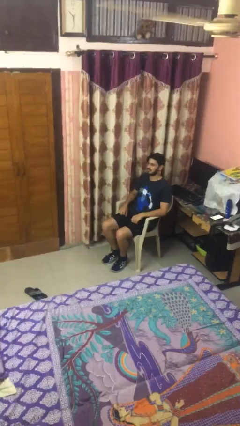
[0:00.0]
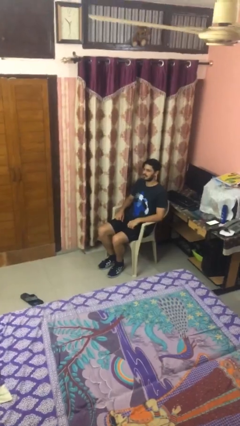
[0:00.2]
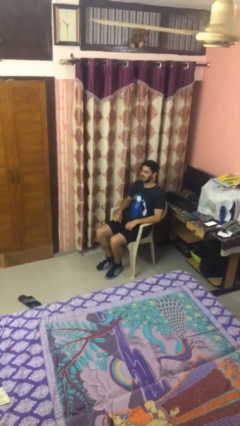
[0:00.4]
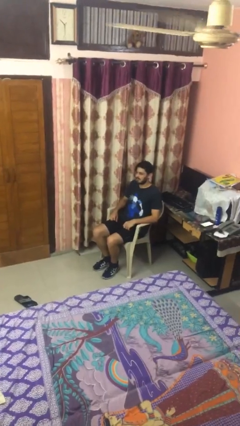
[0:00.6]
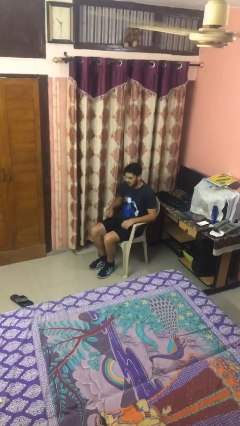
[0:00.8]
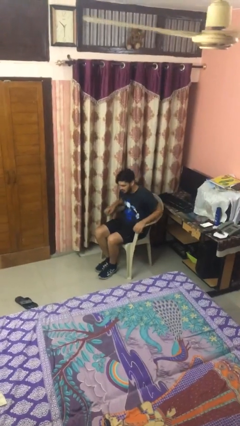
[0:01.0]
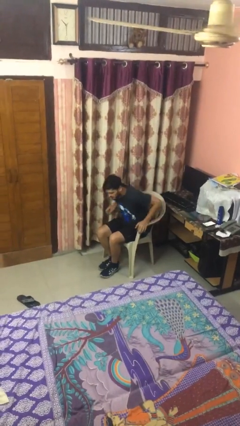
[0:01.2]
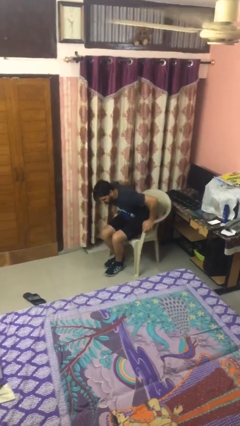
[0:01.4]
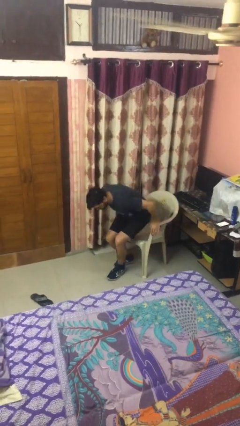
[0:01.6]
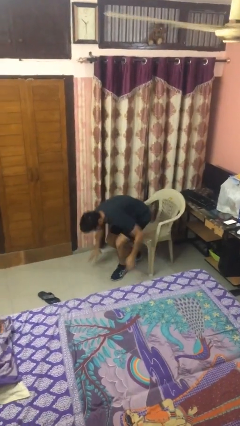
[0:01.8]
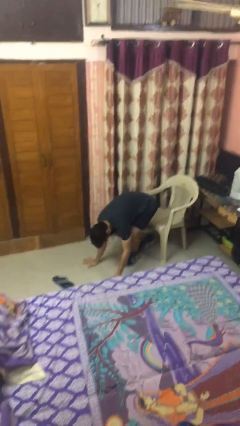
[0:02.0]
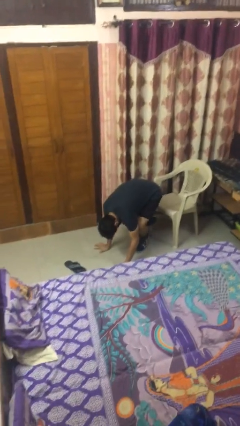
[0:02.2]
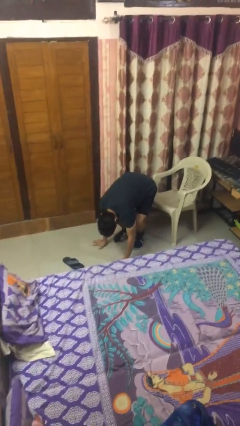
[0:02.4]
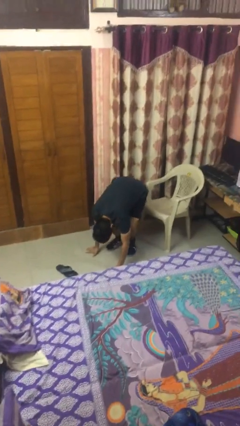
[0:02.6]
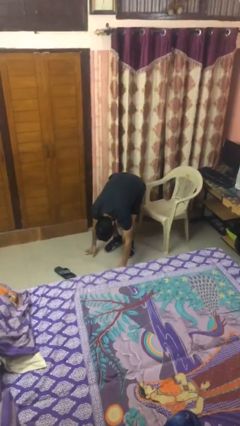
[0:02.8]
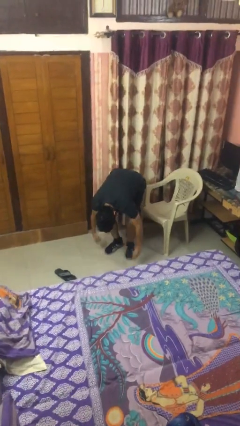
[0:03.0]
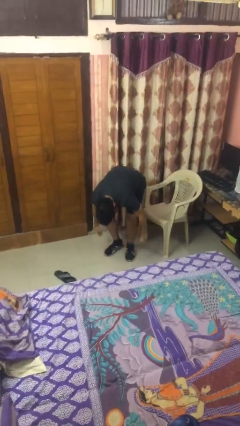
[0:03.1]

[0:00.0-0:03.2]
person falls from chair

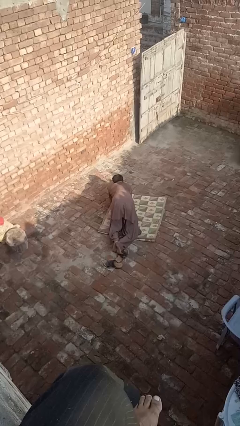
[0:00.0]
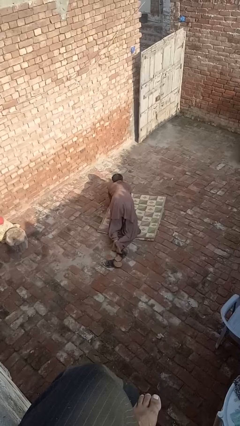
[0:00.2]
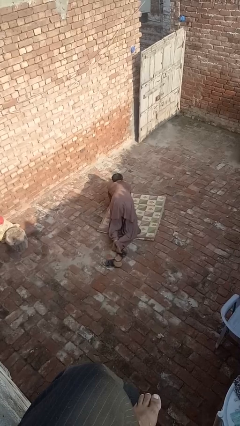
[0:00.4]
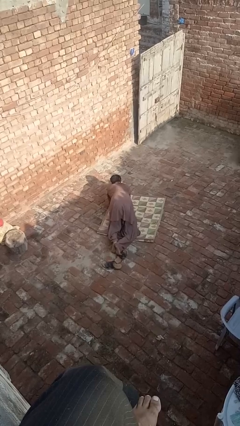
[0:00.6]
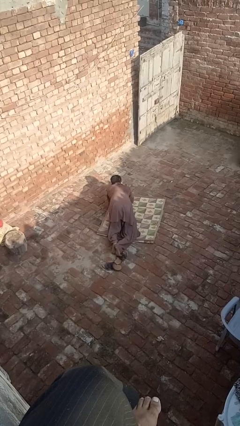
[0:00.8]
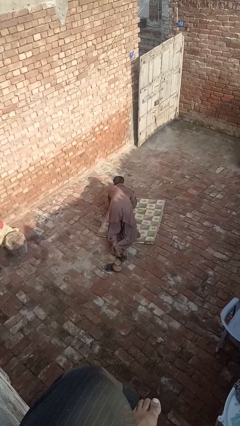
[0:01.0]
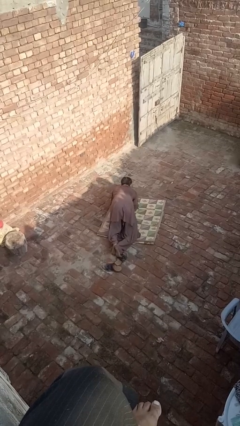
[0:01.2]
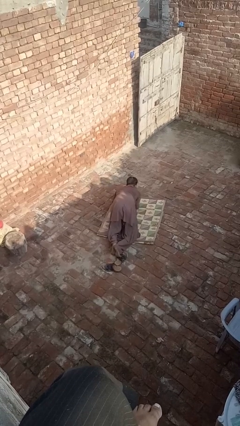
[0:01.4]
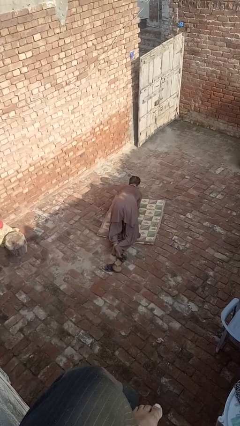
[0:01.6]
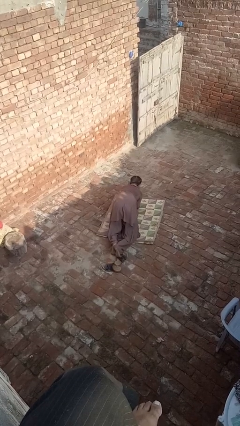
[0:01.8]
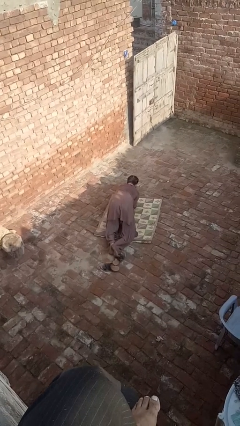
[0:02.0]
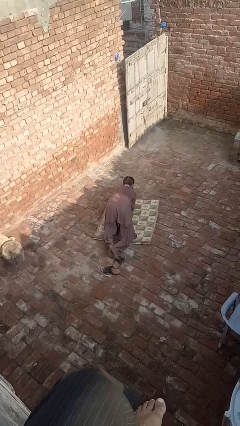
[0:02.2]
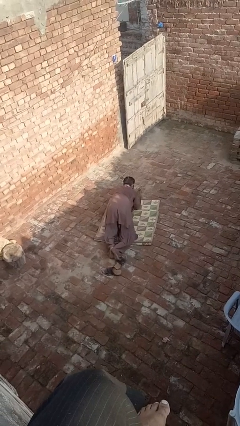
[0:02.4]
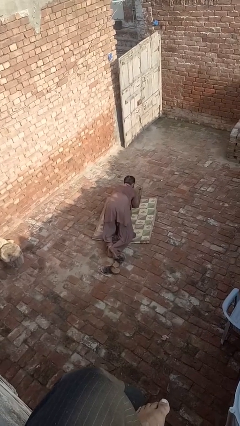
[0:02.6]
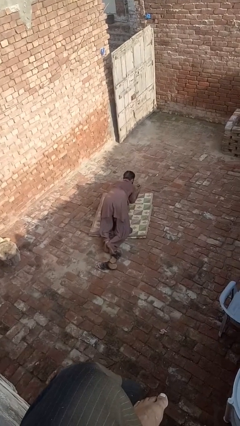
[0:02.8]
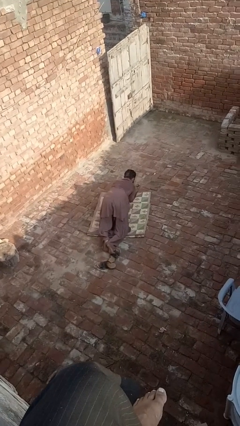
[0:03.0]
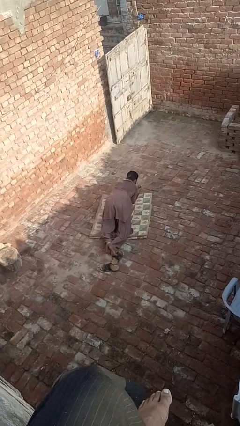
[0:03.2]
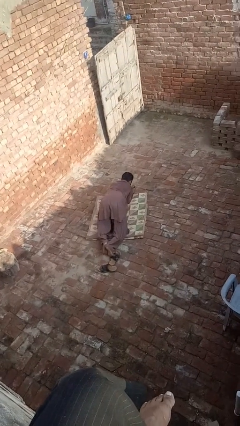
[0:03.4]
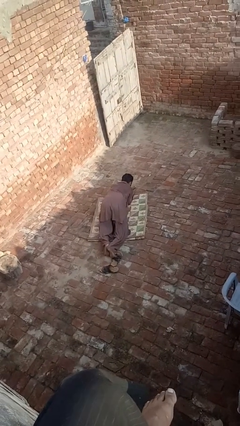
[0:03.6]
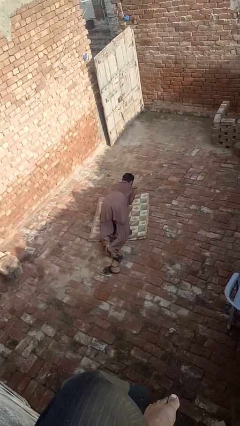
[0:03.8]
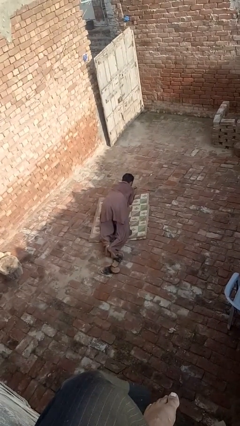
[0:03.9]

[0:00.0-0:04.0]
person crawls

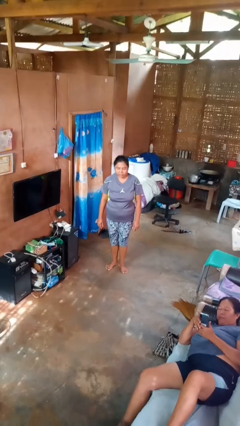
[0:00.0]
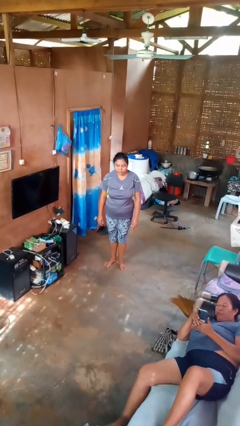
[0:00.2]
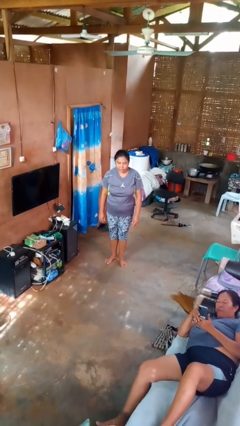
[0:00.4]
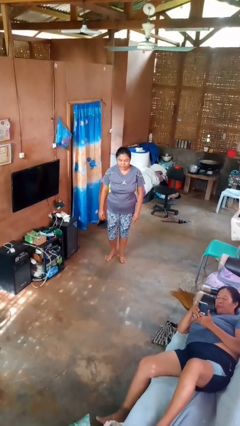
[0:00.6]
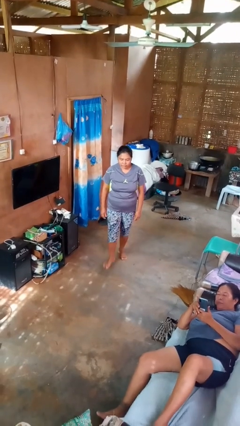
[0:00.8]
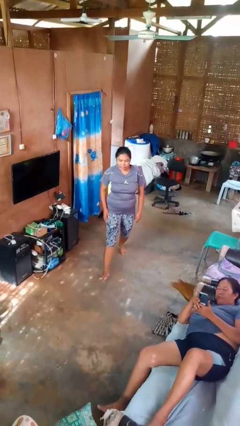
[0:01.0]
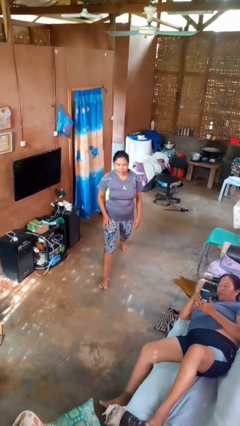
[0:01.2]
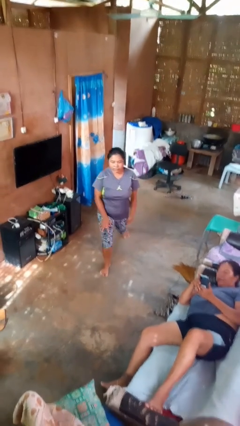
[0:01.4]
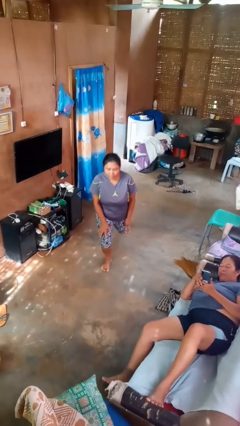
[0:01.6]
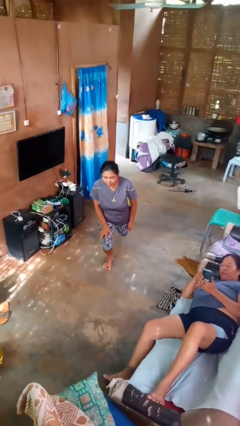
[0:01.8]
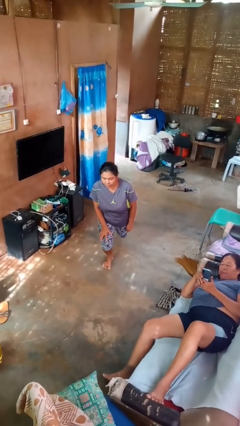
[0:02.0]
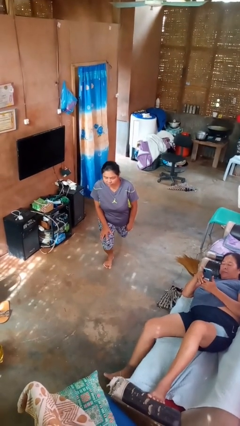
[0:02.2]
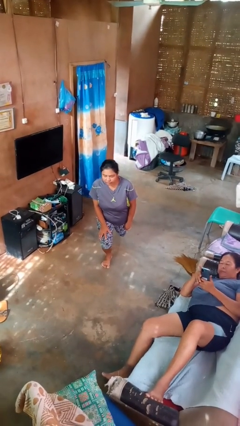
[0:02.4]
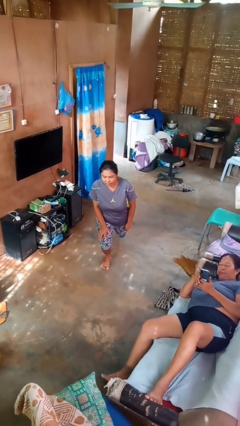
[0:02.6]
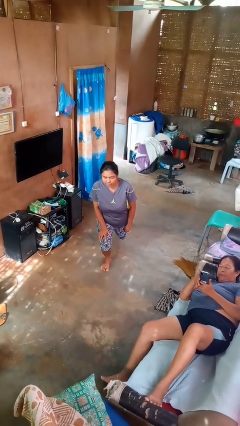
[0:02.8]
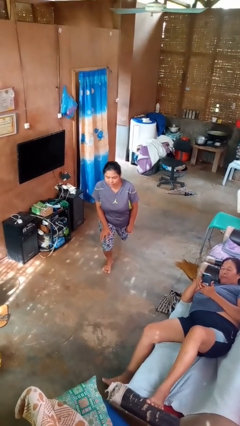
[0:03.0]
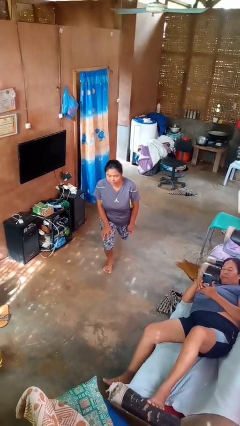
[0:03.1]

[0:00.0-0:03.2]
person exercises with lunges

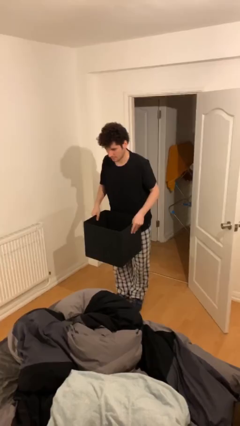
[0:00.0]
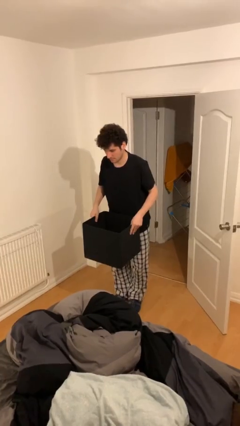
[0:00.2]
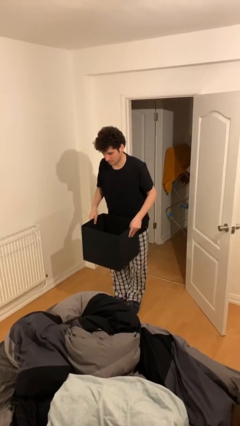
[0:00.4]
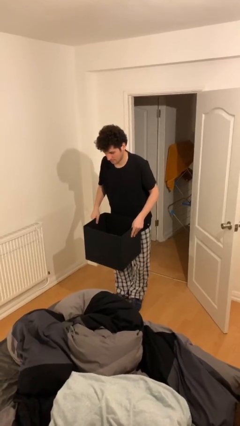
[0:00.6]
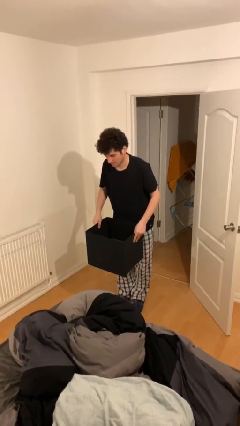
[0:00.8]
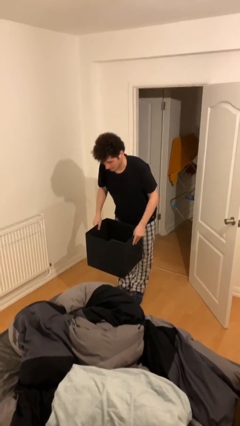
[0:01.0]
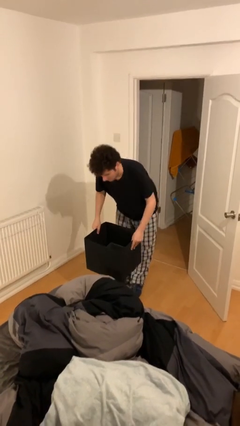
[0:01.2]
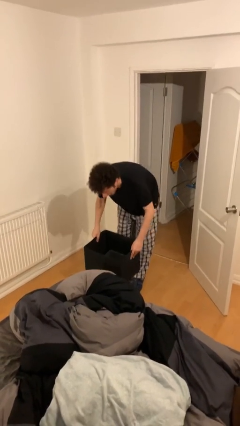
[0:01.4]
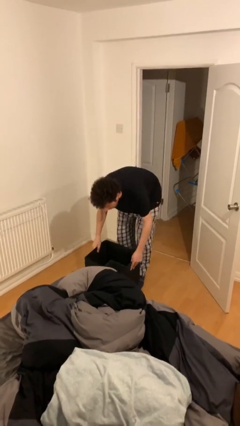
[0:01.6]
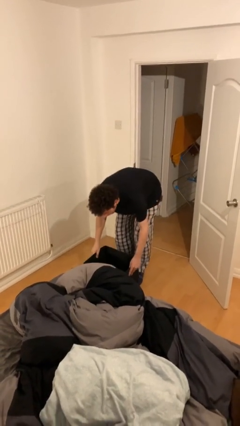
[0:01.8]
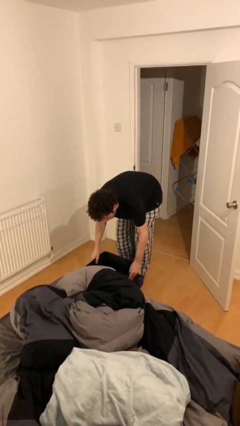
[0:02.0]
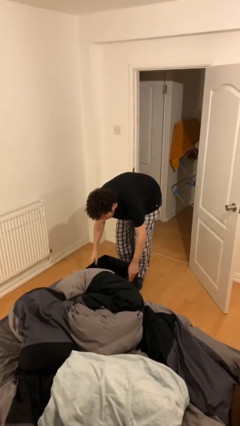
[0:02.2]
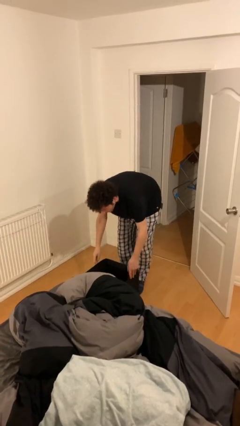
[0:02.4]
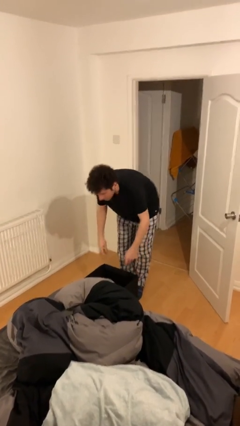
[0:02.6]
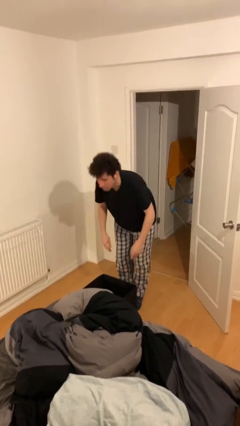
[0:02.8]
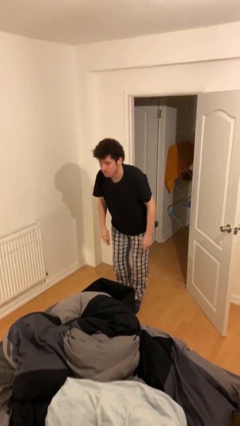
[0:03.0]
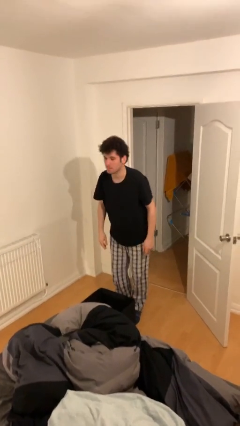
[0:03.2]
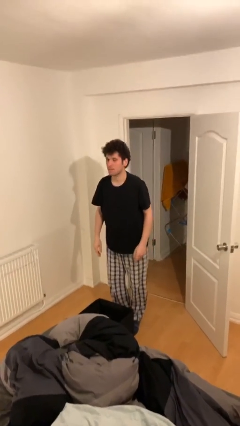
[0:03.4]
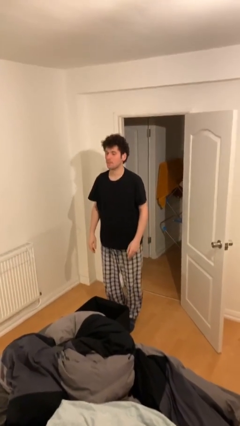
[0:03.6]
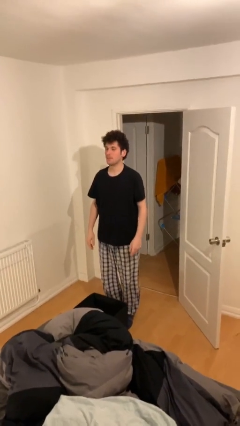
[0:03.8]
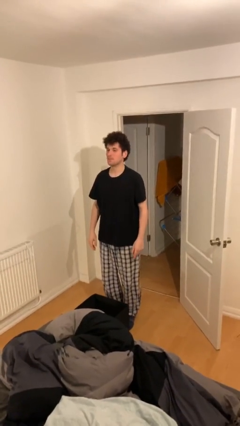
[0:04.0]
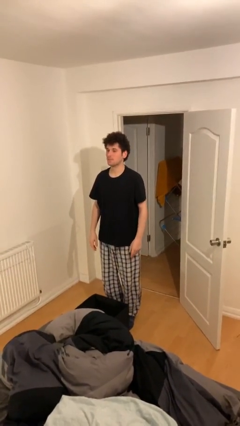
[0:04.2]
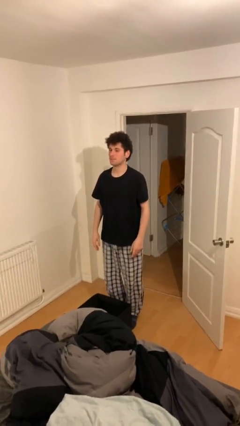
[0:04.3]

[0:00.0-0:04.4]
person puts down object on floor

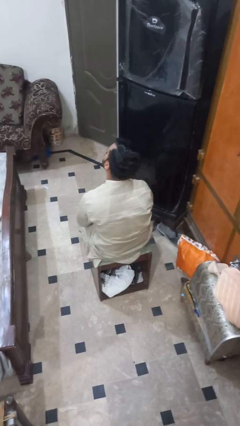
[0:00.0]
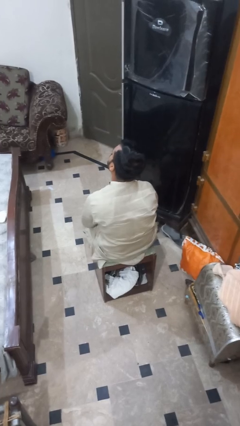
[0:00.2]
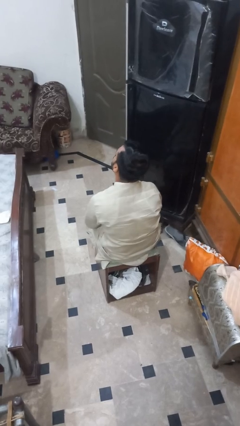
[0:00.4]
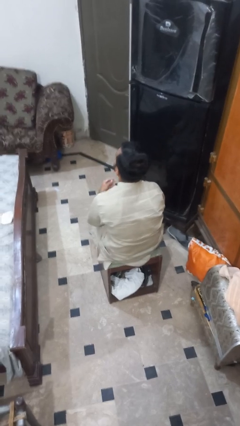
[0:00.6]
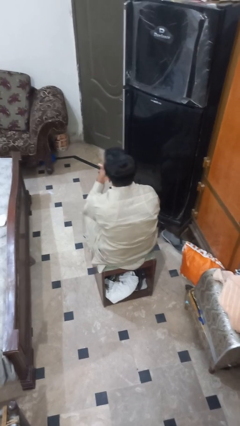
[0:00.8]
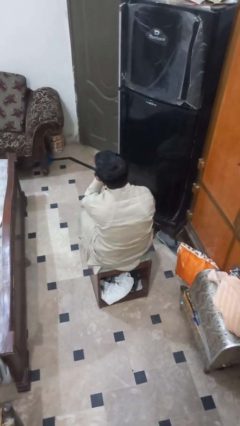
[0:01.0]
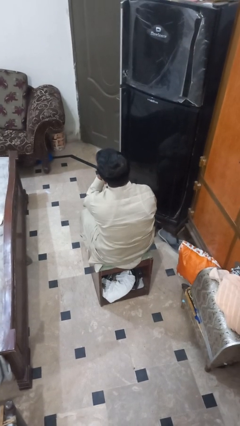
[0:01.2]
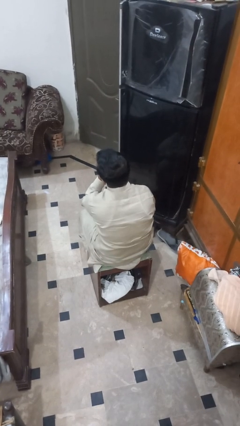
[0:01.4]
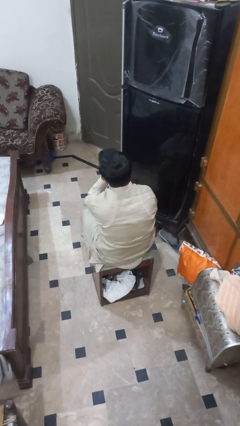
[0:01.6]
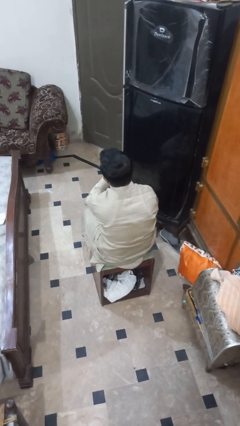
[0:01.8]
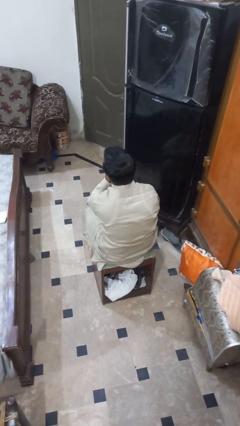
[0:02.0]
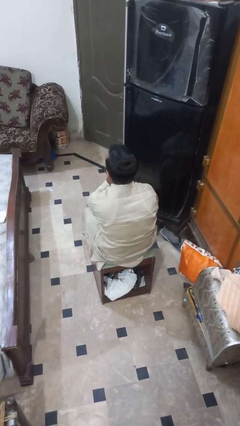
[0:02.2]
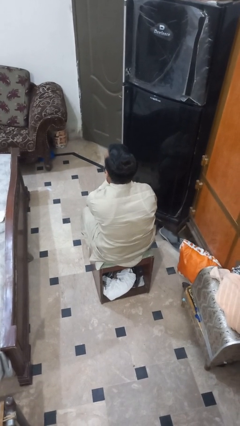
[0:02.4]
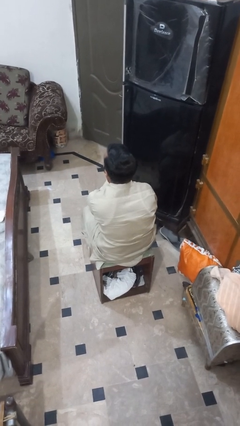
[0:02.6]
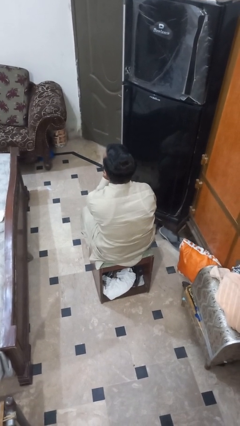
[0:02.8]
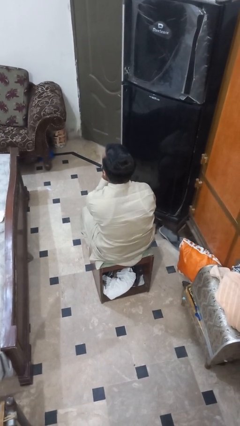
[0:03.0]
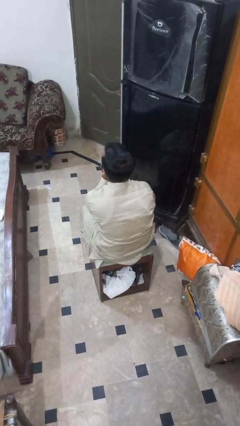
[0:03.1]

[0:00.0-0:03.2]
person strokes chin
